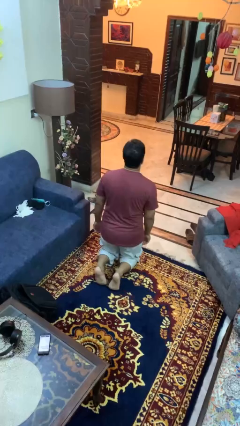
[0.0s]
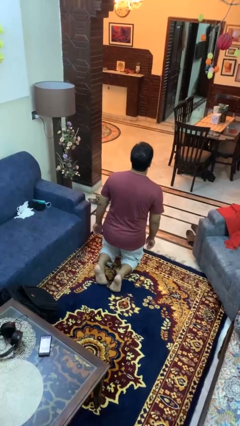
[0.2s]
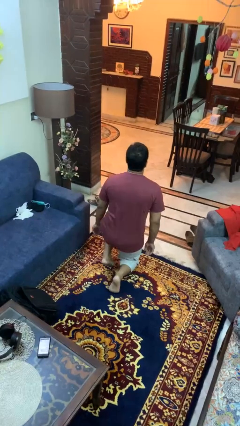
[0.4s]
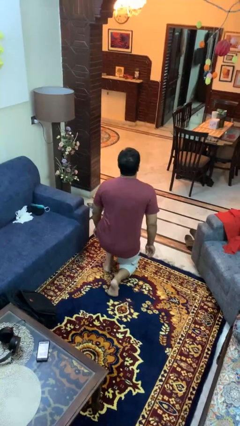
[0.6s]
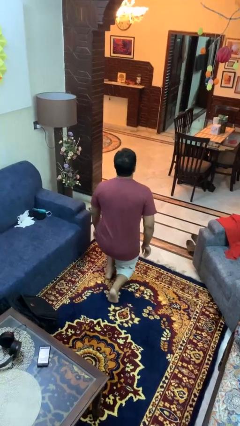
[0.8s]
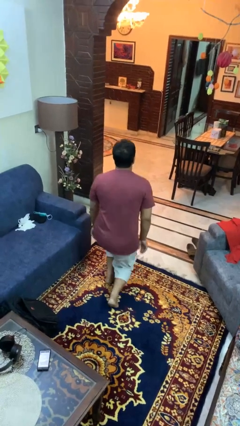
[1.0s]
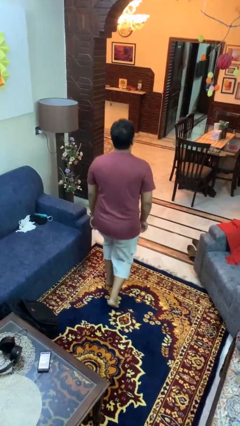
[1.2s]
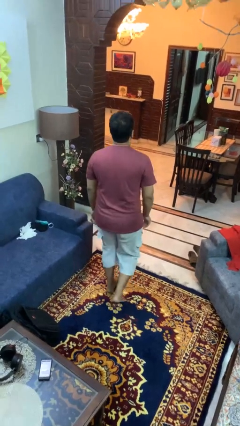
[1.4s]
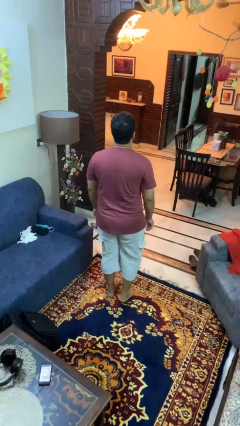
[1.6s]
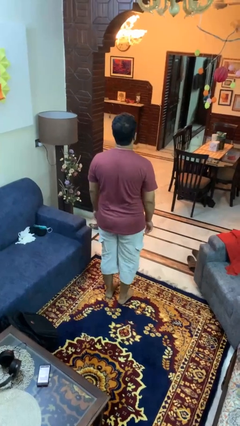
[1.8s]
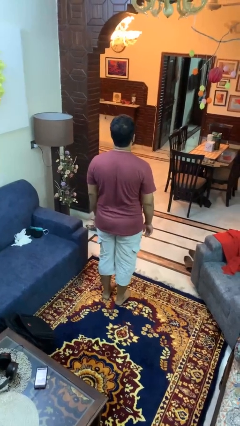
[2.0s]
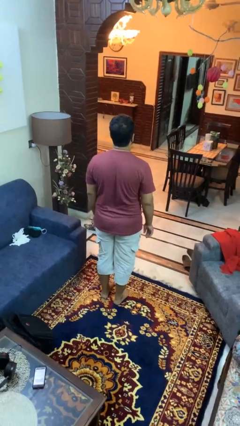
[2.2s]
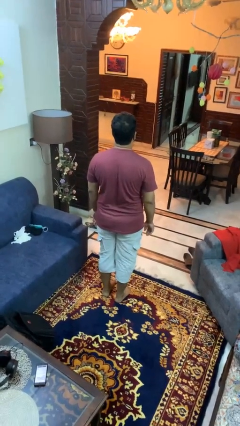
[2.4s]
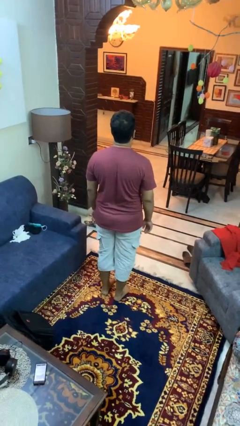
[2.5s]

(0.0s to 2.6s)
person stands up from floor

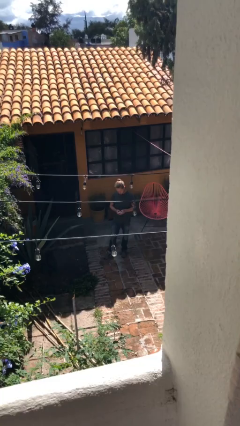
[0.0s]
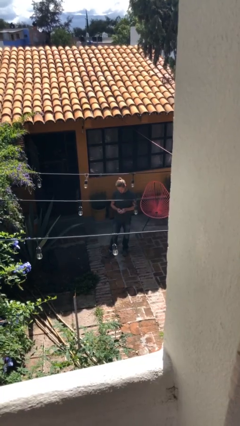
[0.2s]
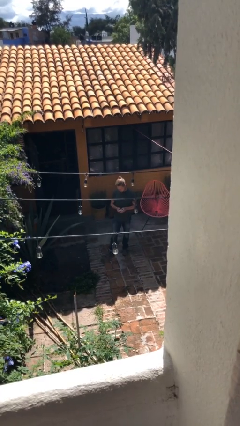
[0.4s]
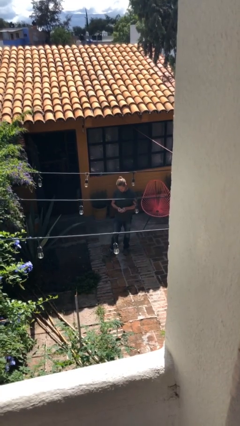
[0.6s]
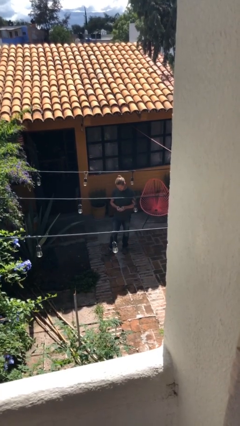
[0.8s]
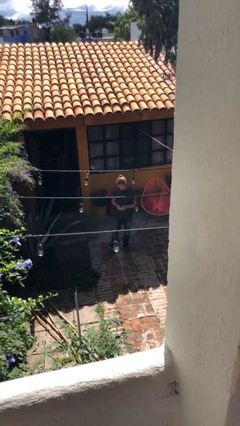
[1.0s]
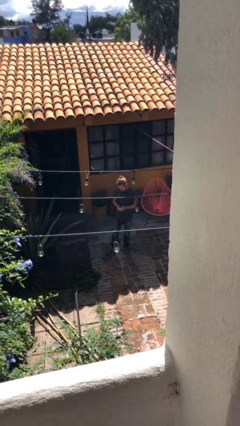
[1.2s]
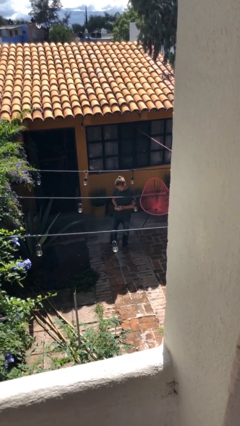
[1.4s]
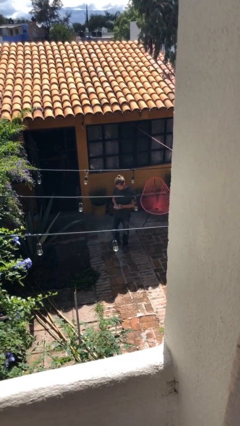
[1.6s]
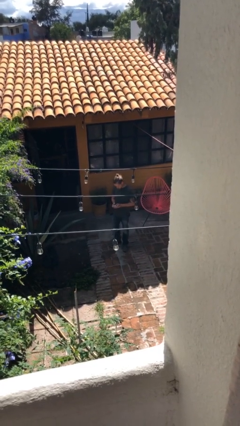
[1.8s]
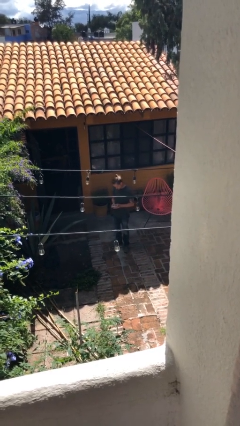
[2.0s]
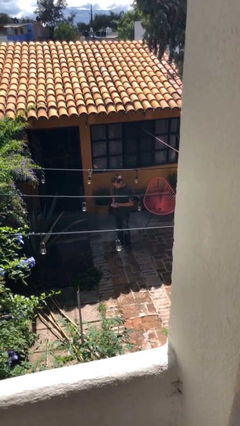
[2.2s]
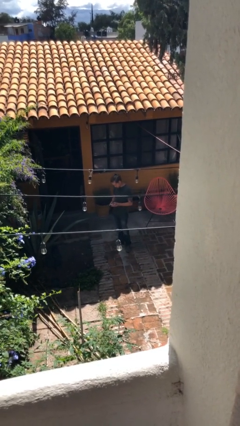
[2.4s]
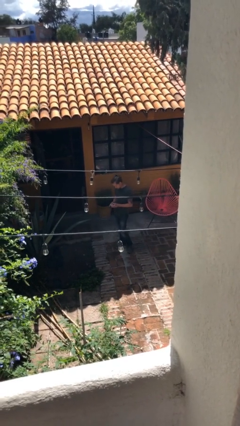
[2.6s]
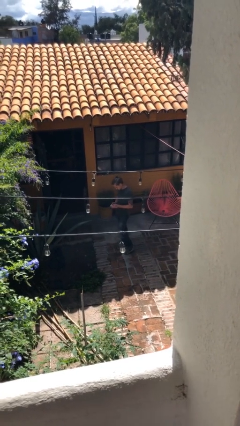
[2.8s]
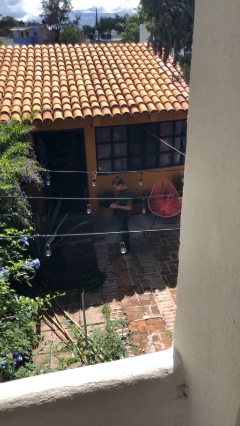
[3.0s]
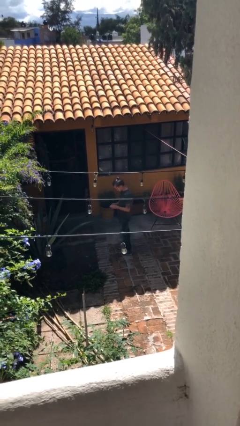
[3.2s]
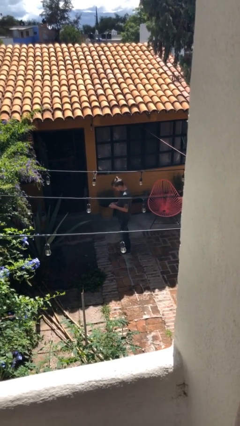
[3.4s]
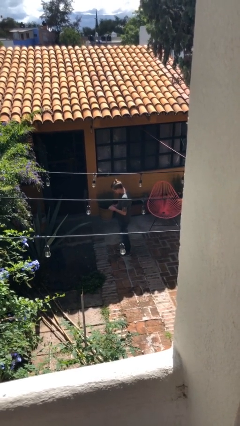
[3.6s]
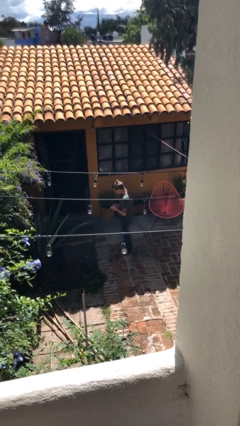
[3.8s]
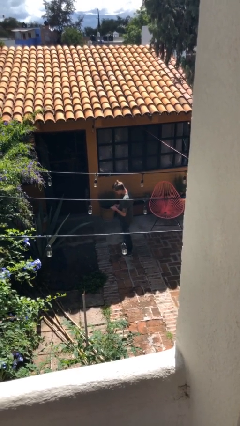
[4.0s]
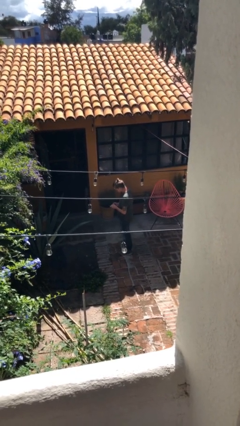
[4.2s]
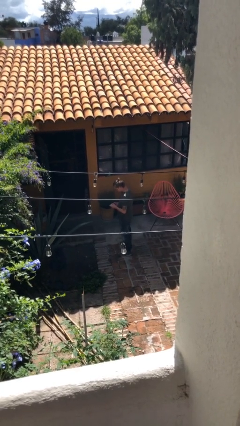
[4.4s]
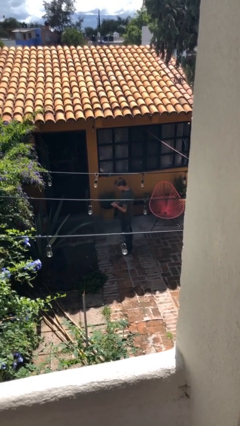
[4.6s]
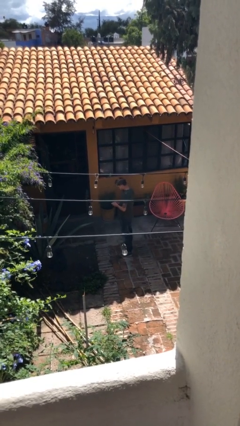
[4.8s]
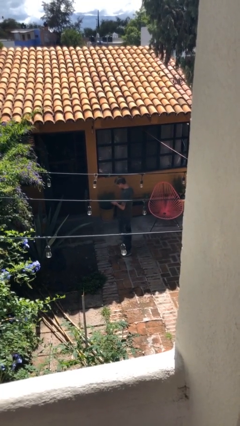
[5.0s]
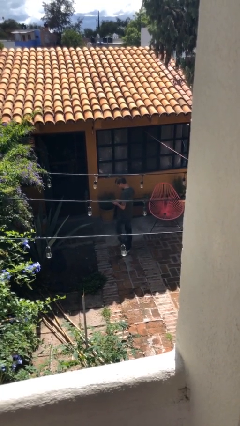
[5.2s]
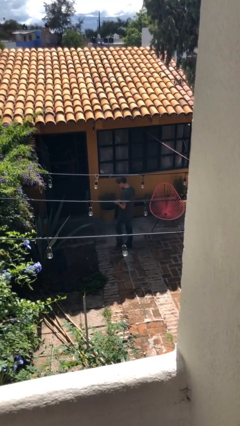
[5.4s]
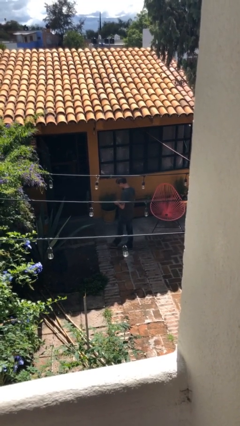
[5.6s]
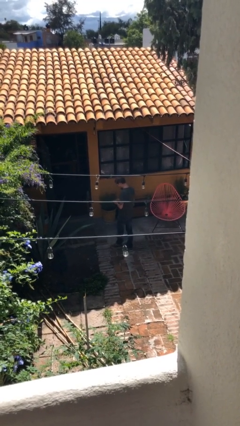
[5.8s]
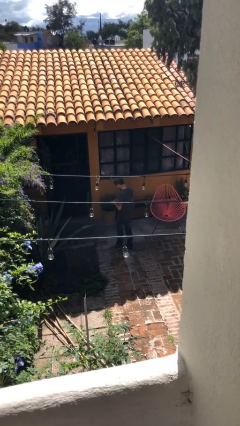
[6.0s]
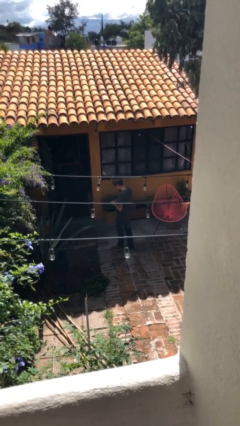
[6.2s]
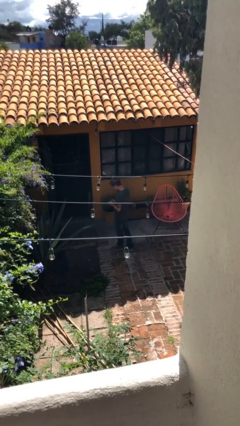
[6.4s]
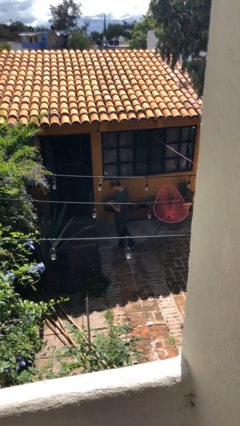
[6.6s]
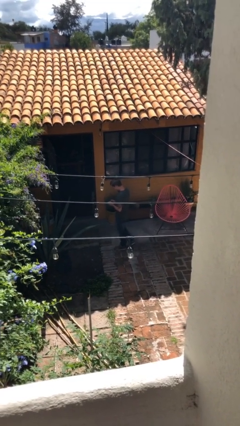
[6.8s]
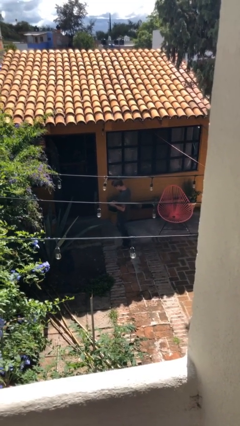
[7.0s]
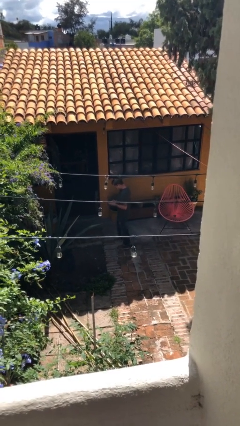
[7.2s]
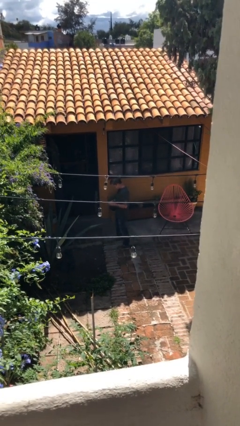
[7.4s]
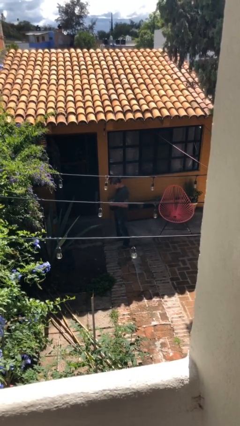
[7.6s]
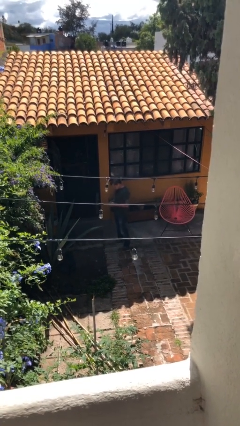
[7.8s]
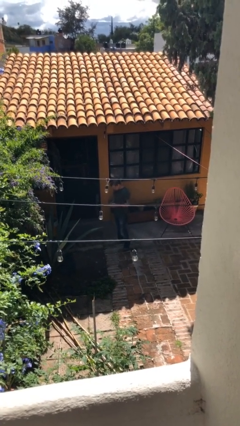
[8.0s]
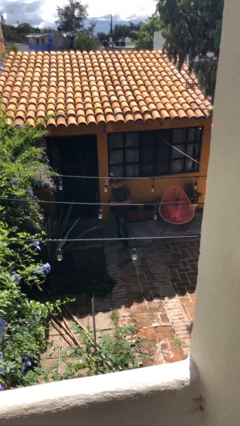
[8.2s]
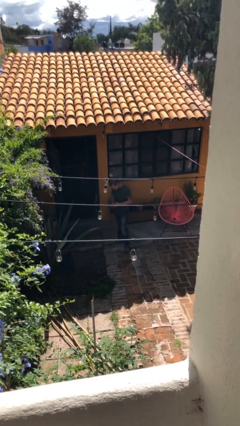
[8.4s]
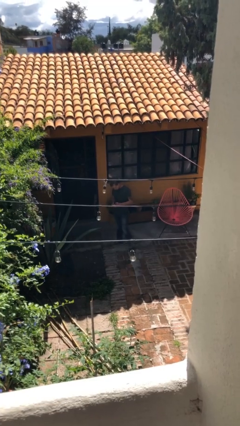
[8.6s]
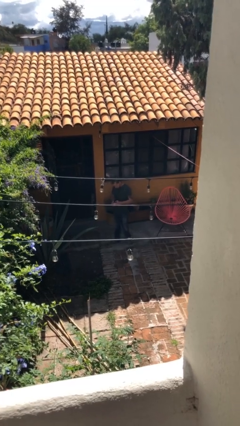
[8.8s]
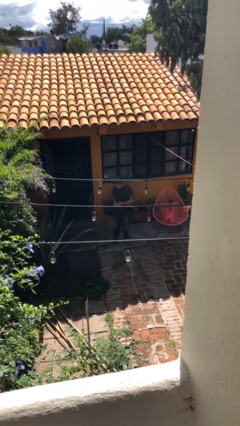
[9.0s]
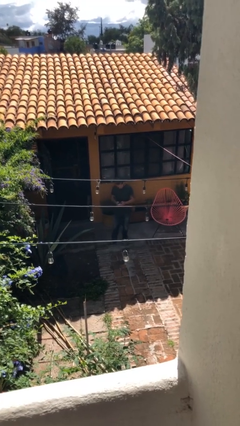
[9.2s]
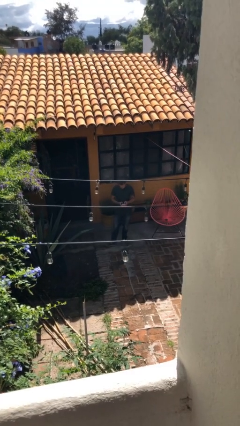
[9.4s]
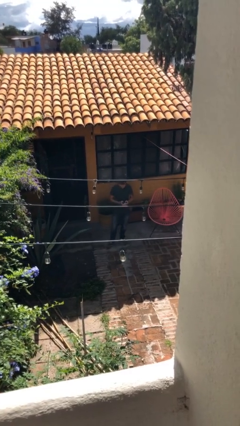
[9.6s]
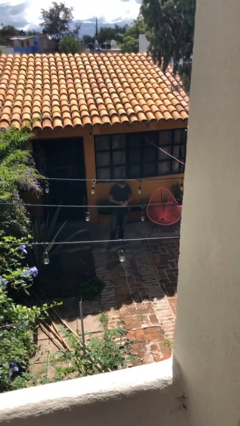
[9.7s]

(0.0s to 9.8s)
person texts on phone

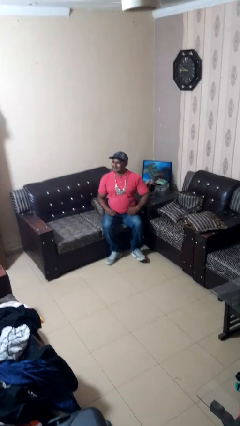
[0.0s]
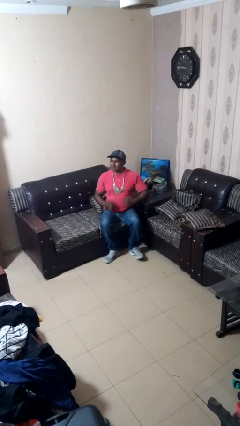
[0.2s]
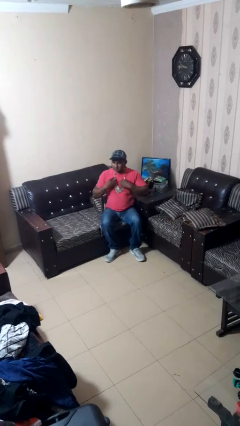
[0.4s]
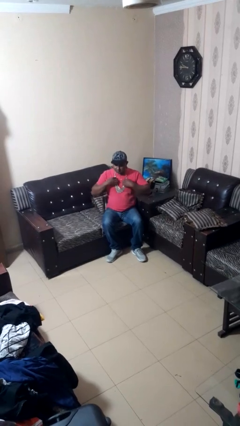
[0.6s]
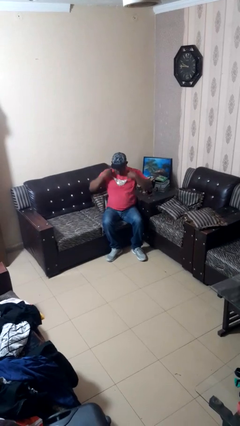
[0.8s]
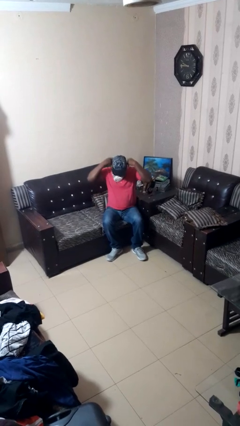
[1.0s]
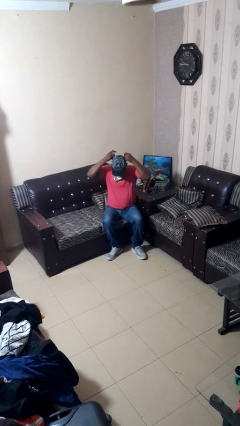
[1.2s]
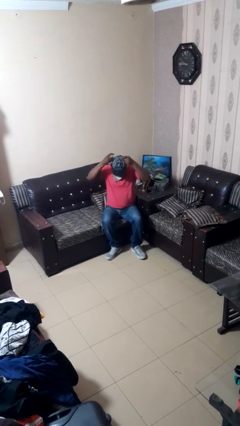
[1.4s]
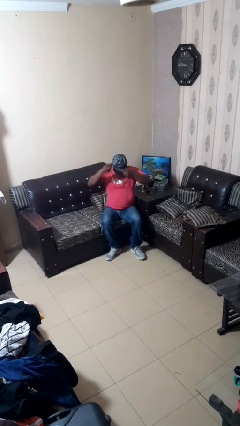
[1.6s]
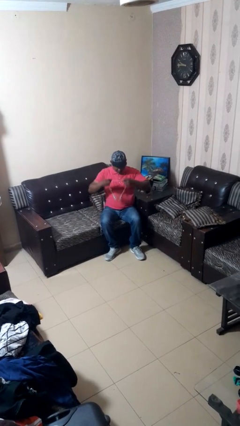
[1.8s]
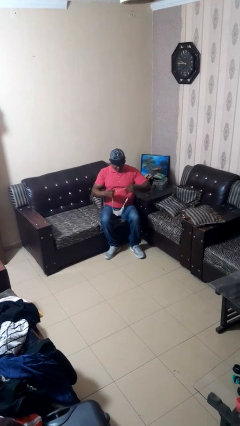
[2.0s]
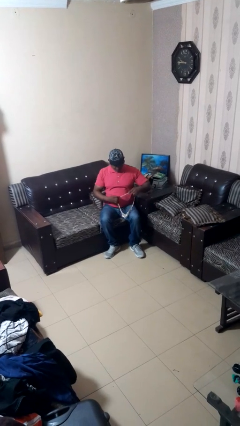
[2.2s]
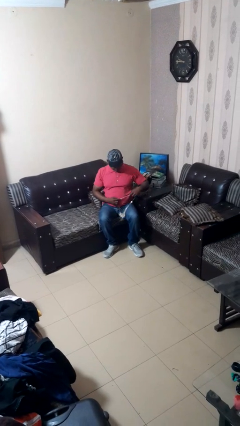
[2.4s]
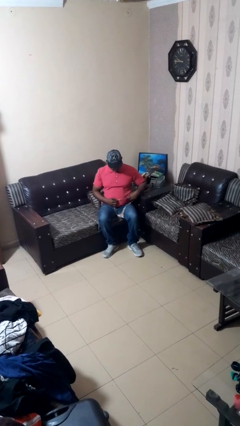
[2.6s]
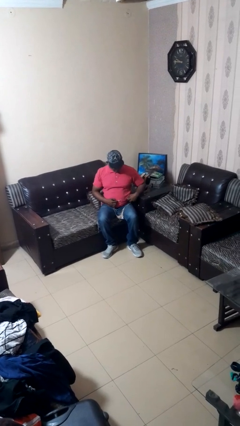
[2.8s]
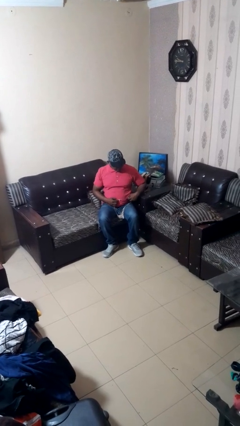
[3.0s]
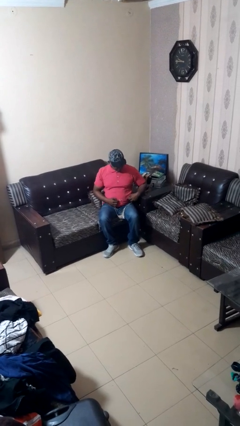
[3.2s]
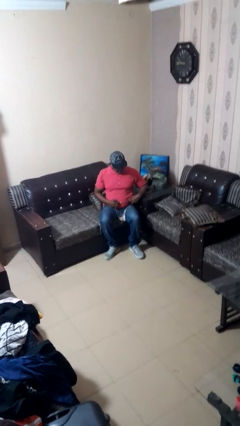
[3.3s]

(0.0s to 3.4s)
person takes off necklace

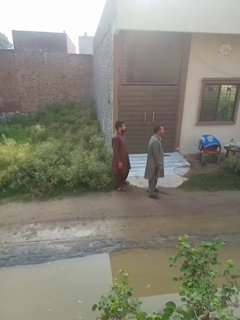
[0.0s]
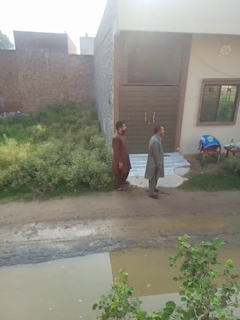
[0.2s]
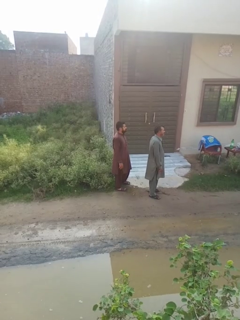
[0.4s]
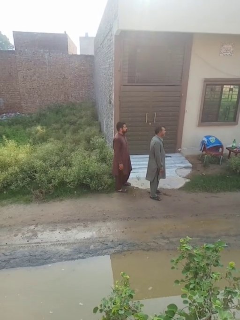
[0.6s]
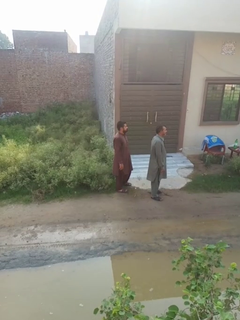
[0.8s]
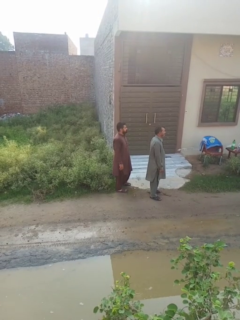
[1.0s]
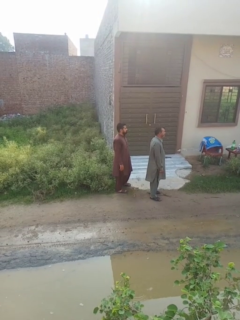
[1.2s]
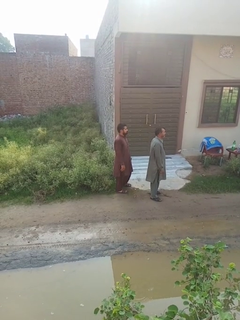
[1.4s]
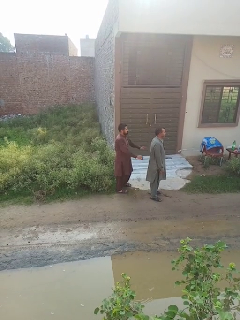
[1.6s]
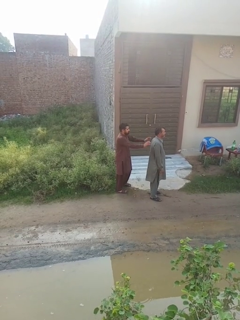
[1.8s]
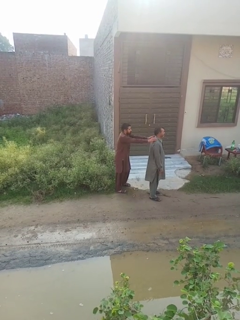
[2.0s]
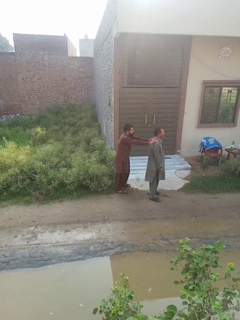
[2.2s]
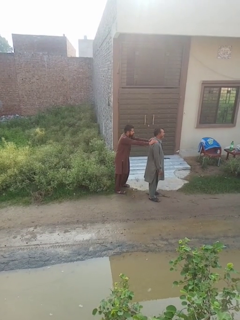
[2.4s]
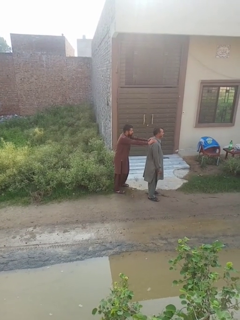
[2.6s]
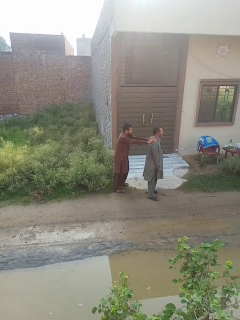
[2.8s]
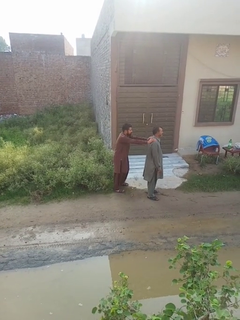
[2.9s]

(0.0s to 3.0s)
person grabs person by shoulder

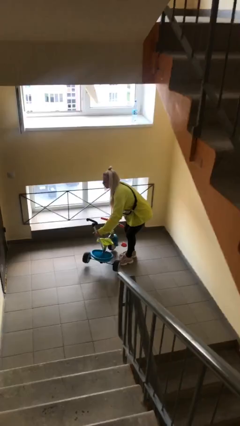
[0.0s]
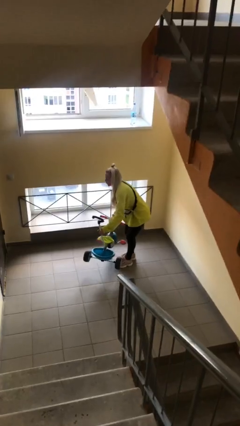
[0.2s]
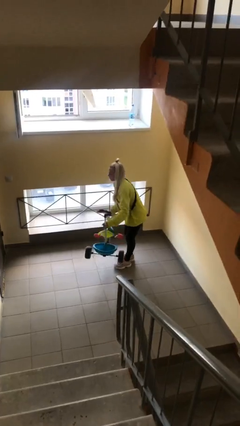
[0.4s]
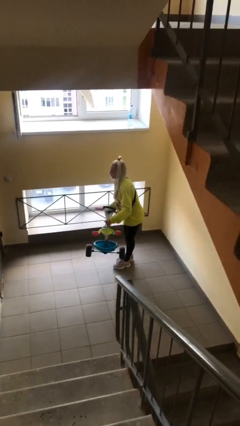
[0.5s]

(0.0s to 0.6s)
person picks up object from floor
